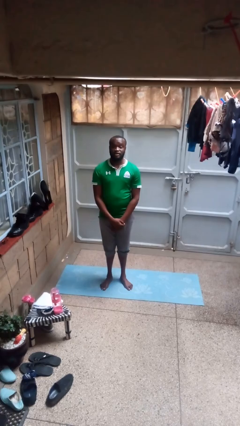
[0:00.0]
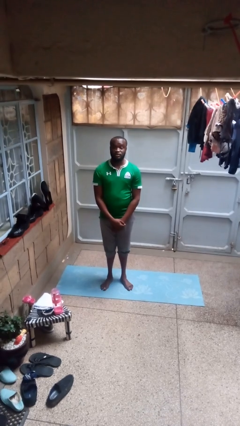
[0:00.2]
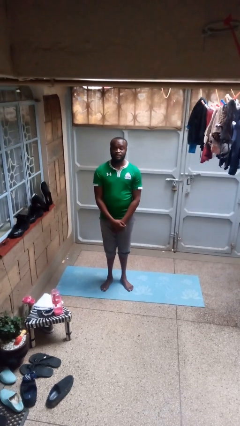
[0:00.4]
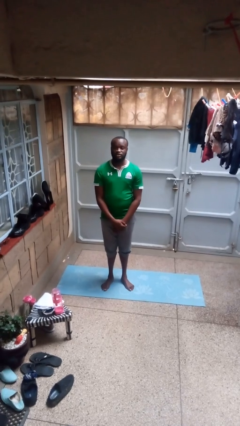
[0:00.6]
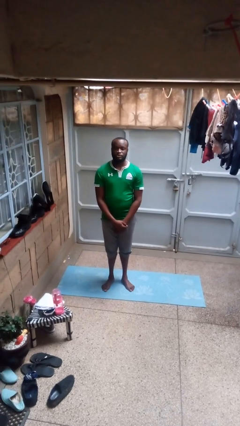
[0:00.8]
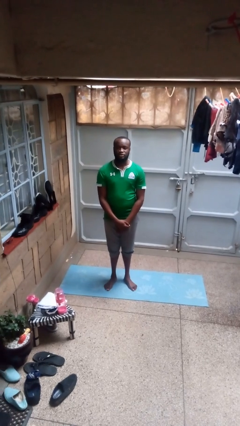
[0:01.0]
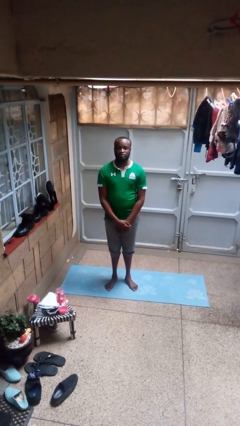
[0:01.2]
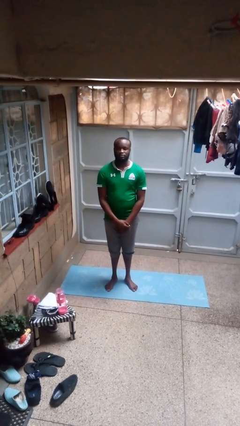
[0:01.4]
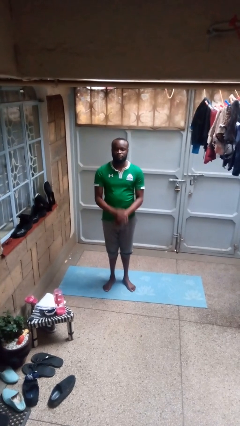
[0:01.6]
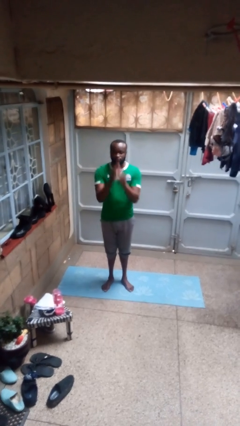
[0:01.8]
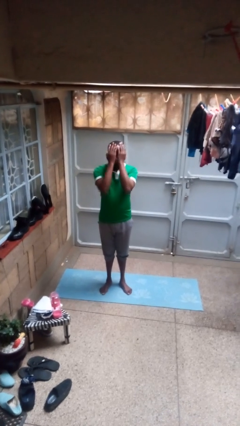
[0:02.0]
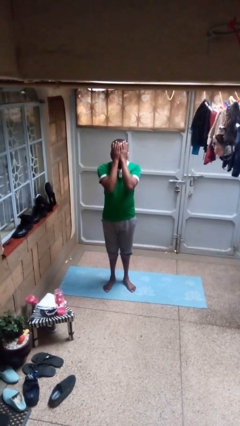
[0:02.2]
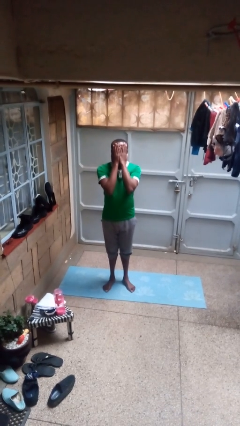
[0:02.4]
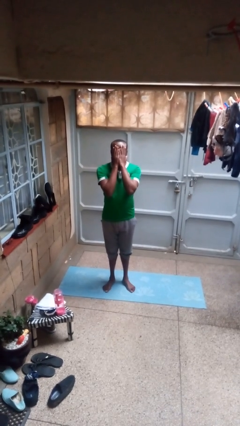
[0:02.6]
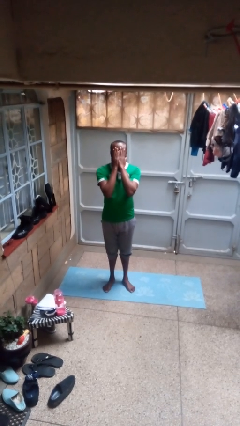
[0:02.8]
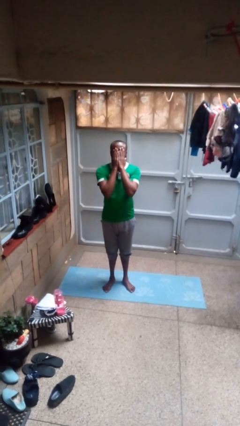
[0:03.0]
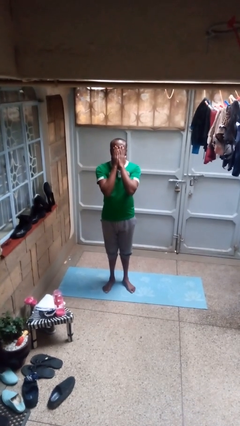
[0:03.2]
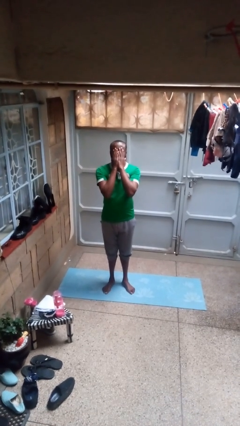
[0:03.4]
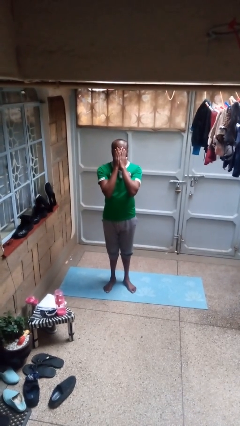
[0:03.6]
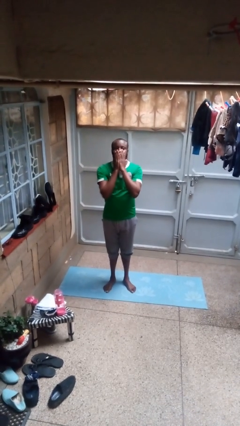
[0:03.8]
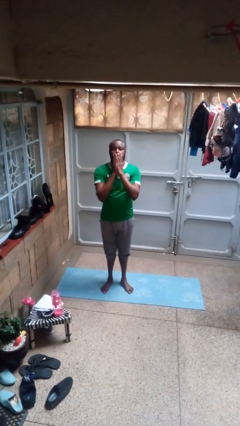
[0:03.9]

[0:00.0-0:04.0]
person covers face with hands

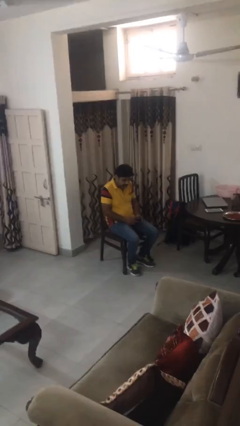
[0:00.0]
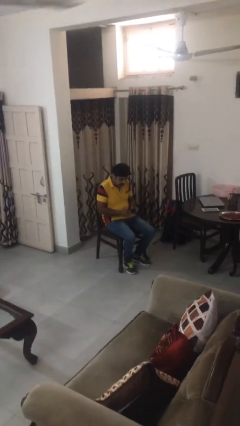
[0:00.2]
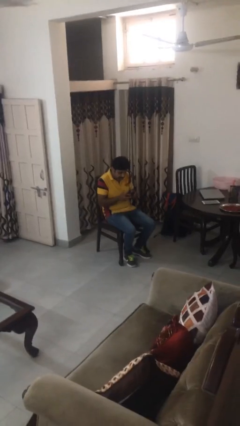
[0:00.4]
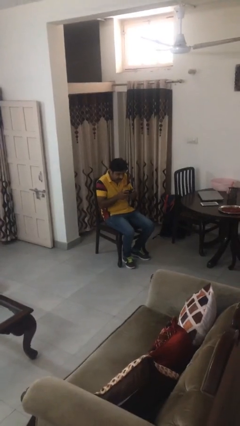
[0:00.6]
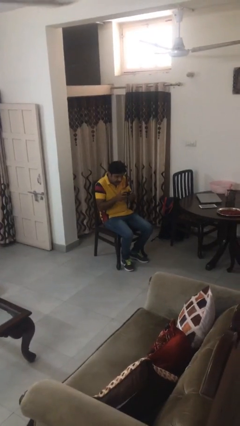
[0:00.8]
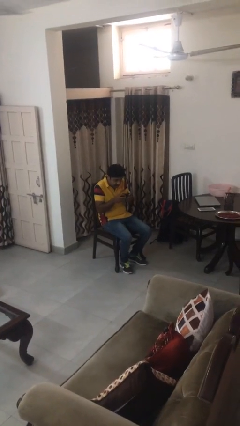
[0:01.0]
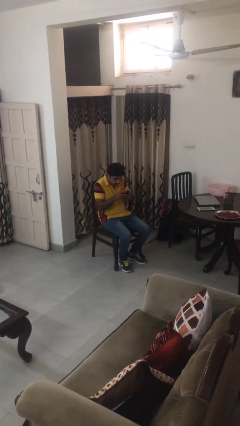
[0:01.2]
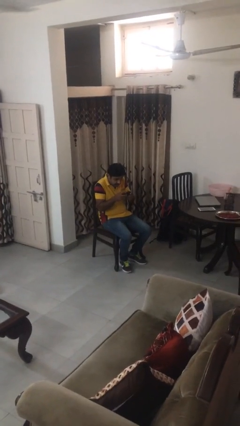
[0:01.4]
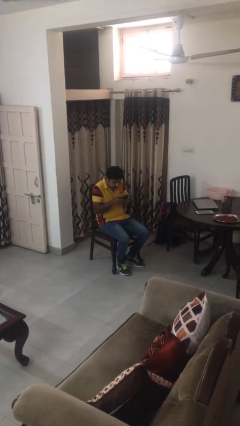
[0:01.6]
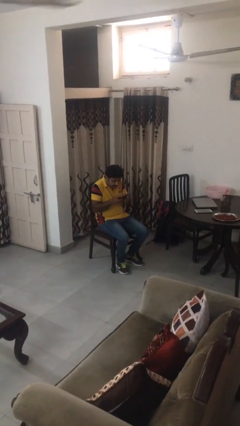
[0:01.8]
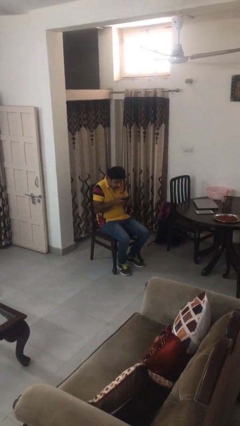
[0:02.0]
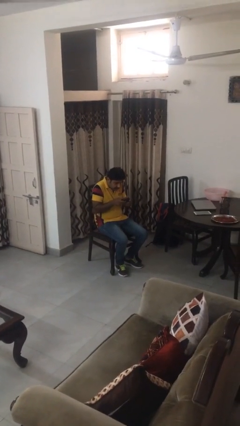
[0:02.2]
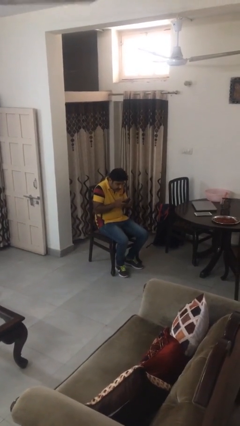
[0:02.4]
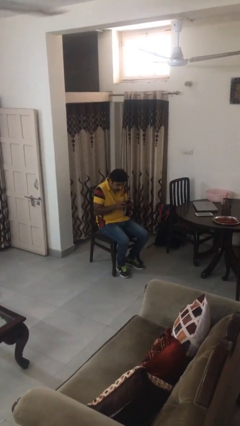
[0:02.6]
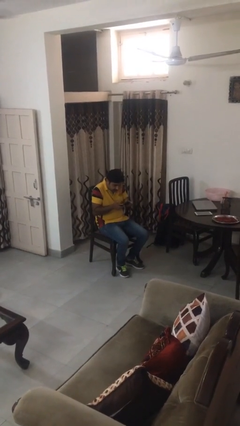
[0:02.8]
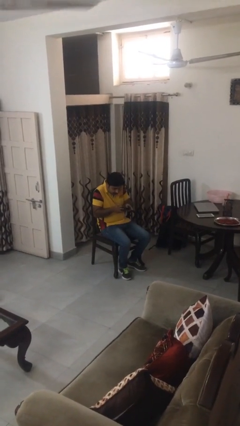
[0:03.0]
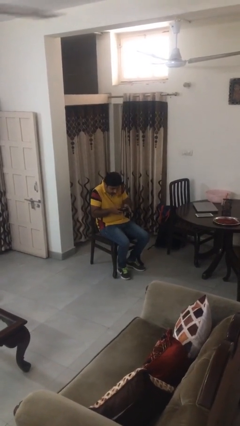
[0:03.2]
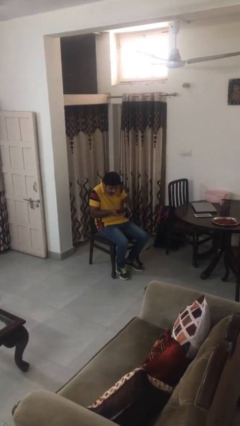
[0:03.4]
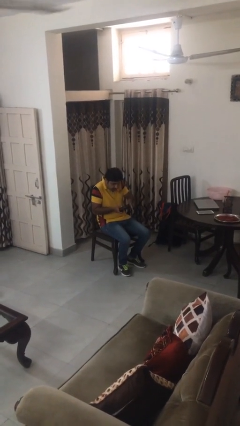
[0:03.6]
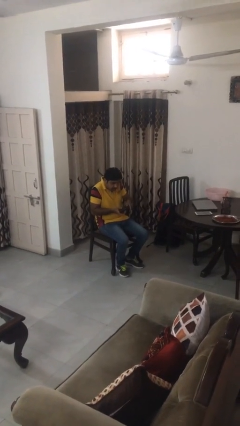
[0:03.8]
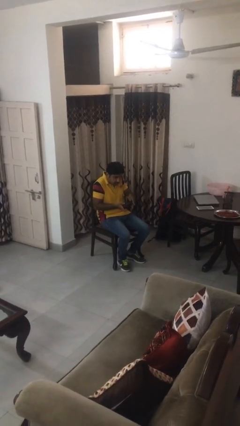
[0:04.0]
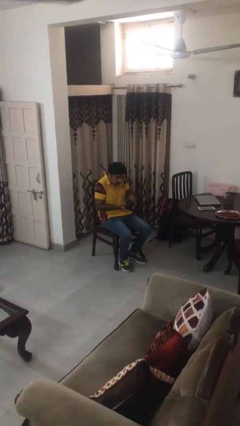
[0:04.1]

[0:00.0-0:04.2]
person interacts with handheld game

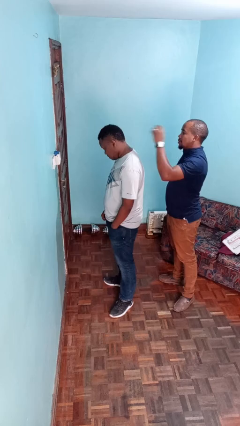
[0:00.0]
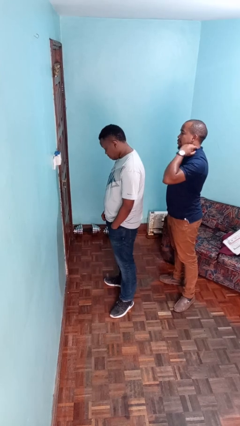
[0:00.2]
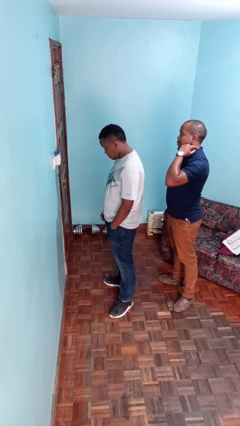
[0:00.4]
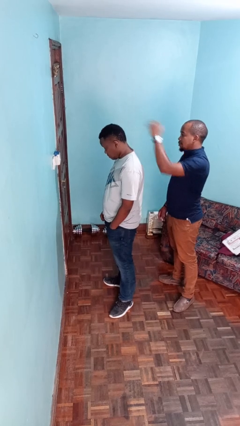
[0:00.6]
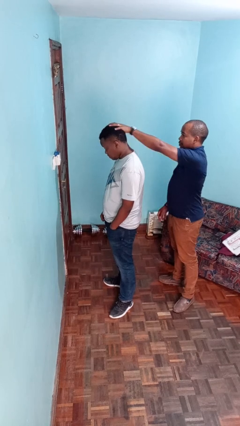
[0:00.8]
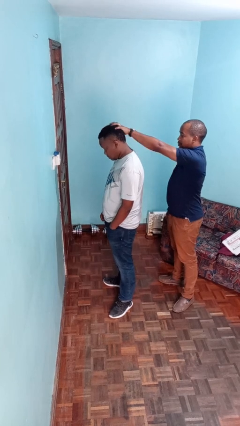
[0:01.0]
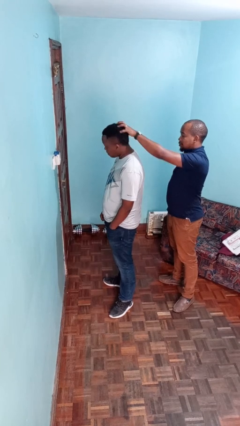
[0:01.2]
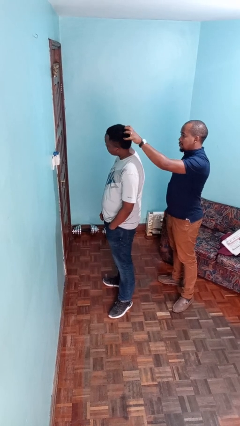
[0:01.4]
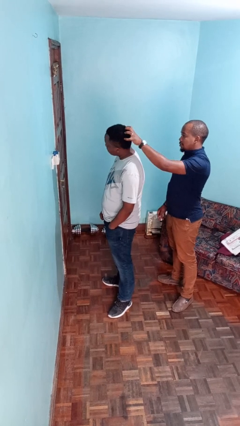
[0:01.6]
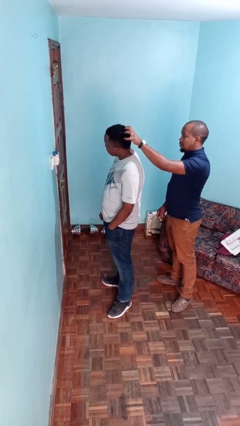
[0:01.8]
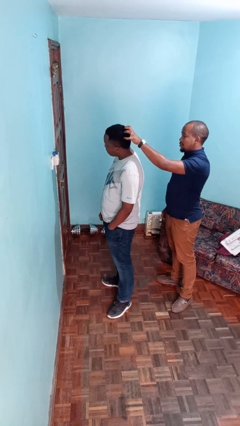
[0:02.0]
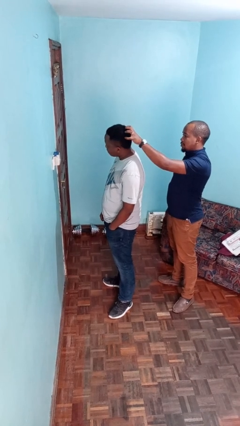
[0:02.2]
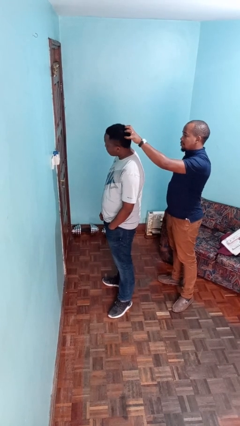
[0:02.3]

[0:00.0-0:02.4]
person grabs person by hair

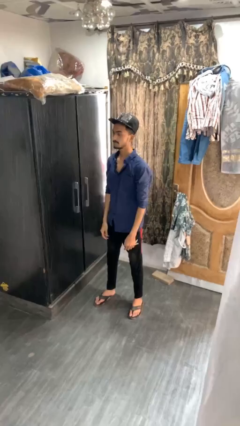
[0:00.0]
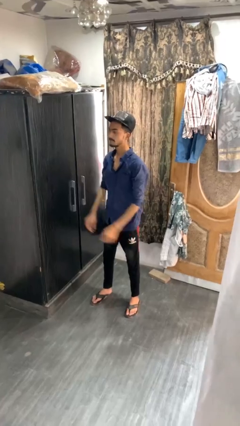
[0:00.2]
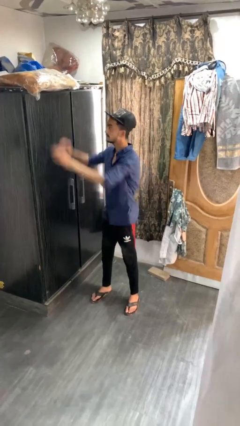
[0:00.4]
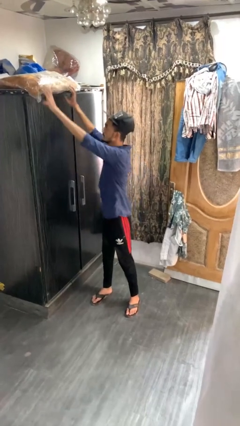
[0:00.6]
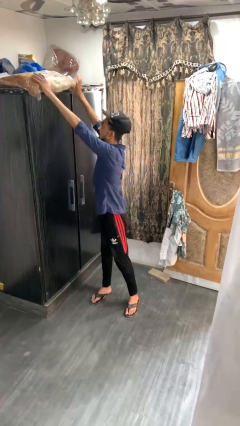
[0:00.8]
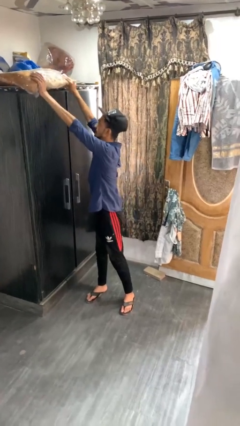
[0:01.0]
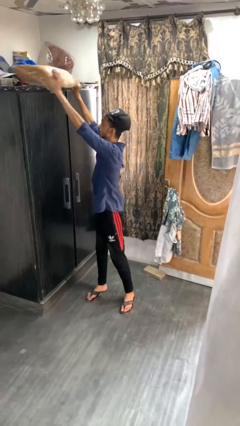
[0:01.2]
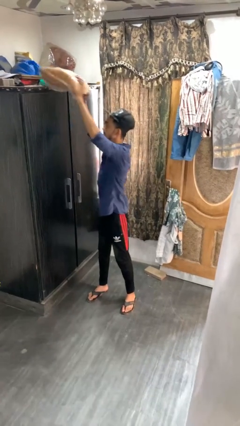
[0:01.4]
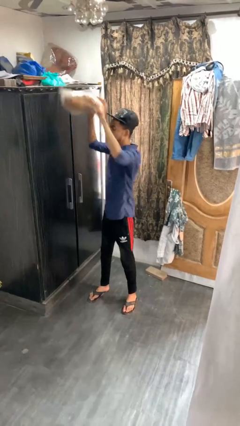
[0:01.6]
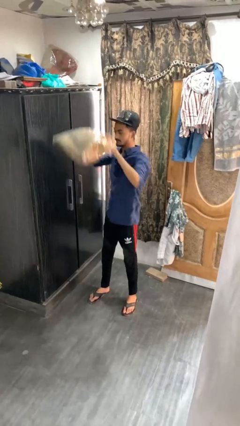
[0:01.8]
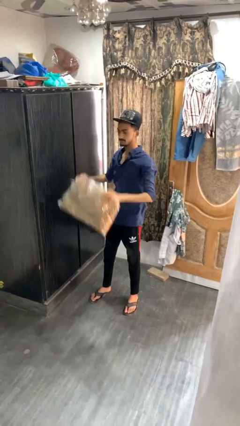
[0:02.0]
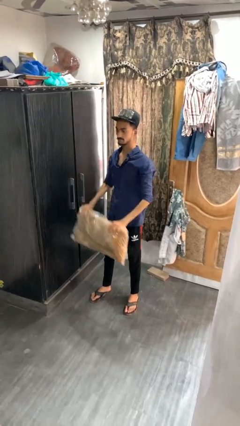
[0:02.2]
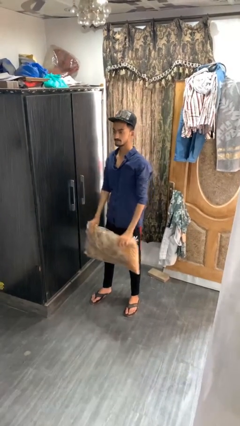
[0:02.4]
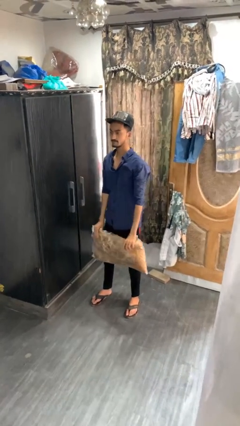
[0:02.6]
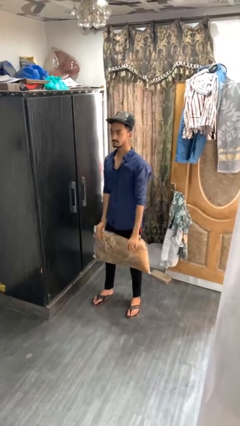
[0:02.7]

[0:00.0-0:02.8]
person picks up object from shelf

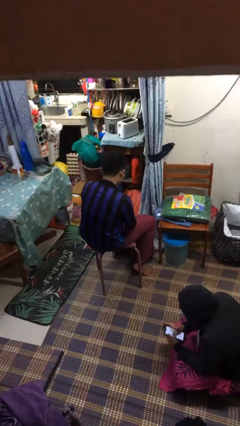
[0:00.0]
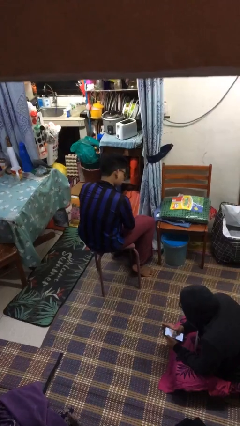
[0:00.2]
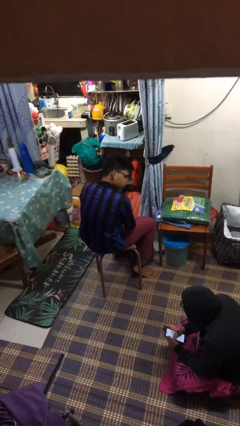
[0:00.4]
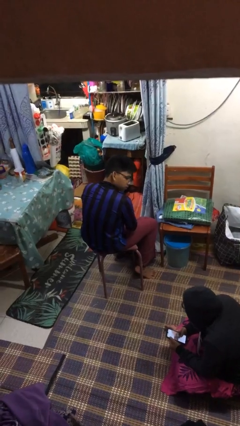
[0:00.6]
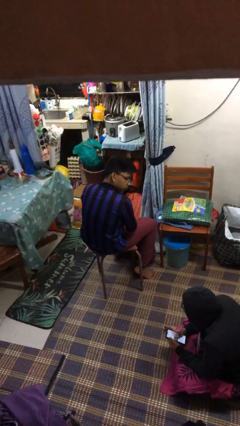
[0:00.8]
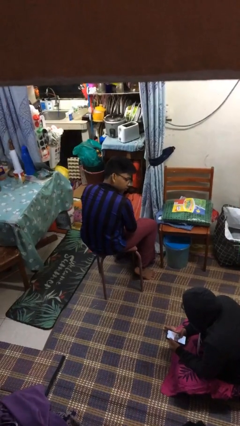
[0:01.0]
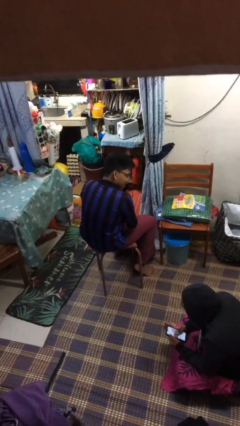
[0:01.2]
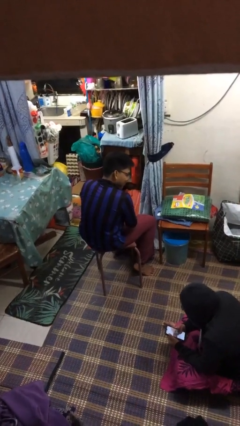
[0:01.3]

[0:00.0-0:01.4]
person looks over shoulder

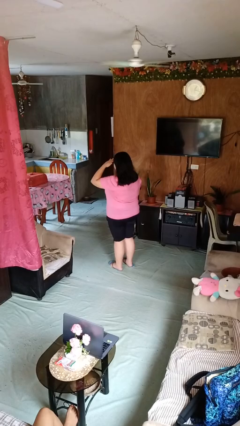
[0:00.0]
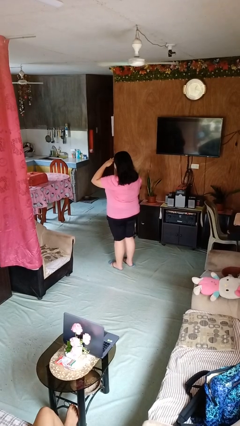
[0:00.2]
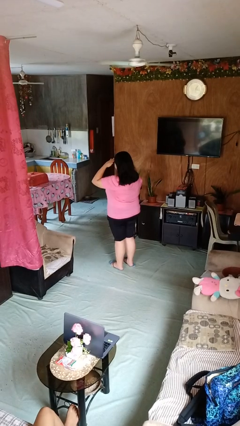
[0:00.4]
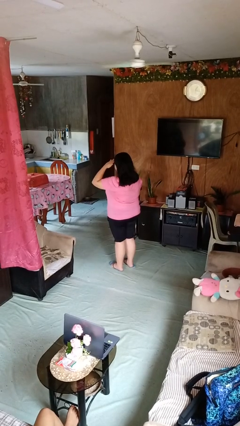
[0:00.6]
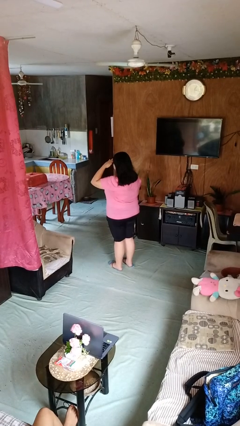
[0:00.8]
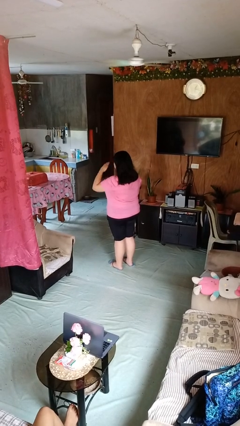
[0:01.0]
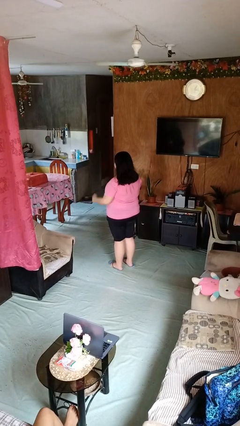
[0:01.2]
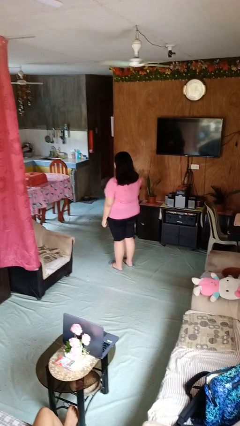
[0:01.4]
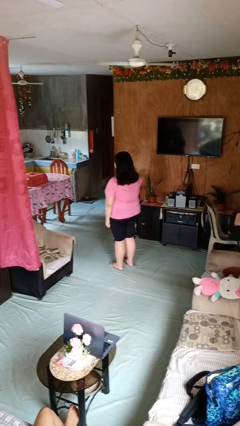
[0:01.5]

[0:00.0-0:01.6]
person salutes

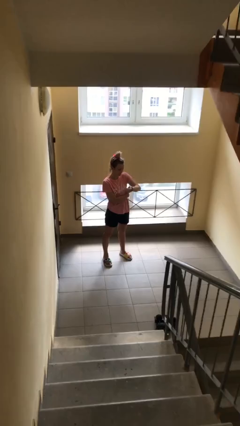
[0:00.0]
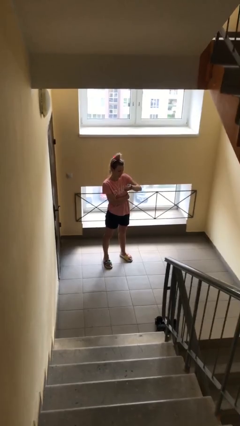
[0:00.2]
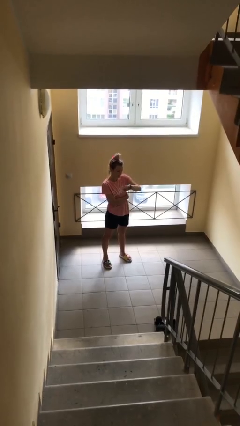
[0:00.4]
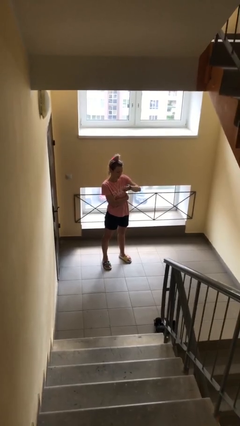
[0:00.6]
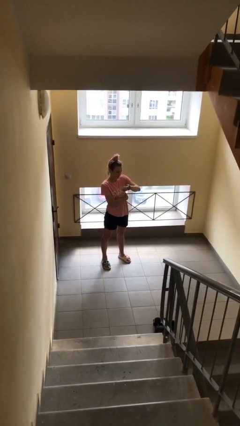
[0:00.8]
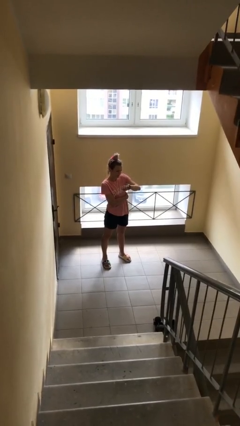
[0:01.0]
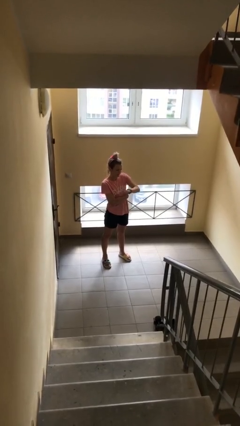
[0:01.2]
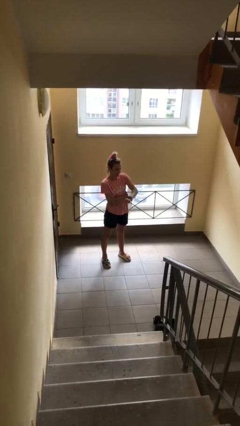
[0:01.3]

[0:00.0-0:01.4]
person looks at wristwatch
